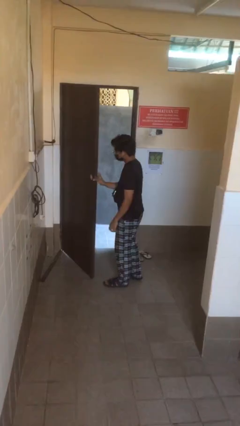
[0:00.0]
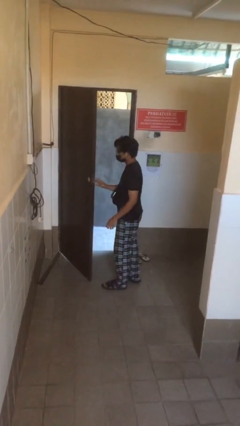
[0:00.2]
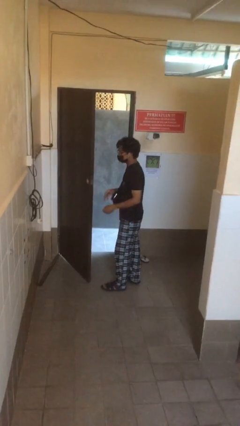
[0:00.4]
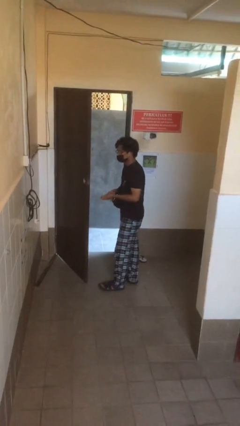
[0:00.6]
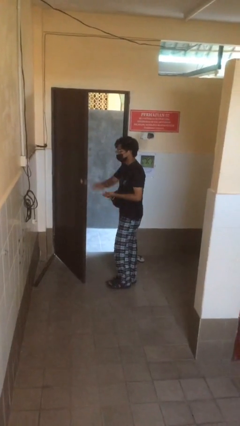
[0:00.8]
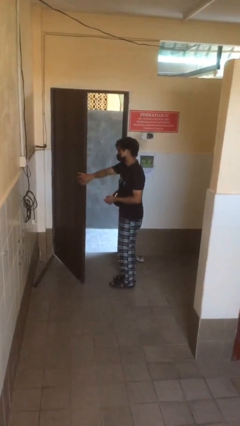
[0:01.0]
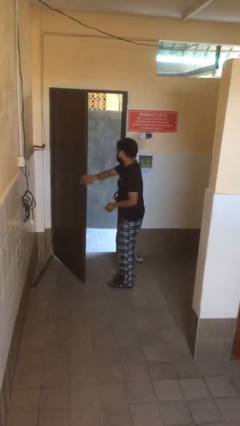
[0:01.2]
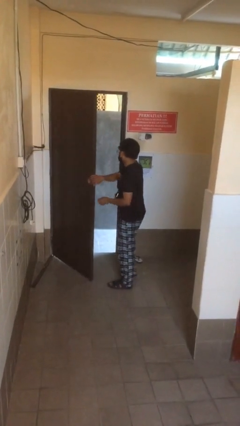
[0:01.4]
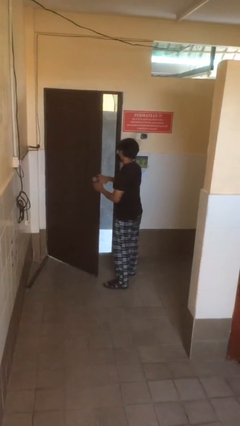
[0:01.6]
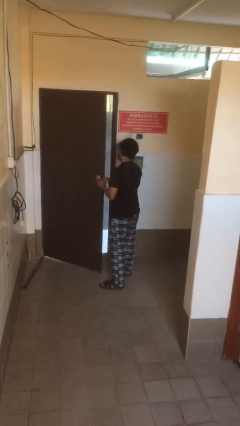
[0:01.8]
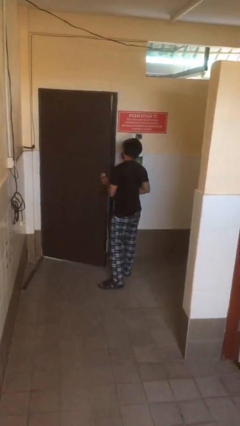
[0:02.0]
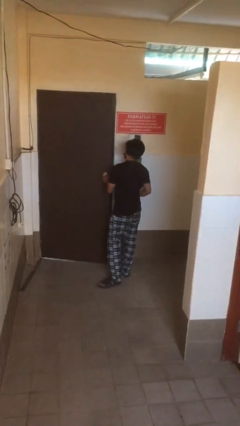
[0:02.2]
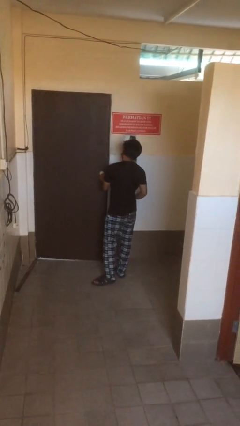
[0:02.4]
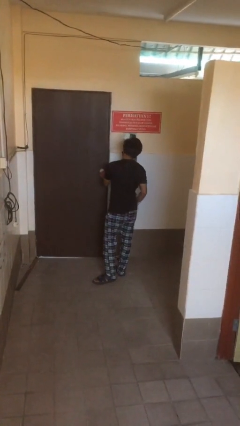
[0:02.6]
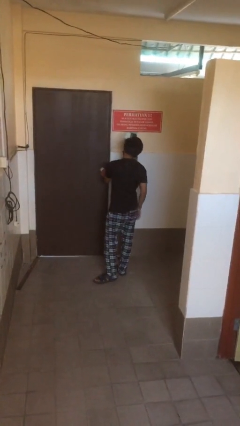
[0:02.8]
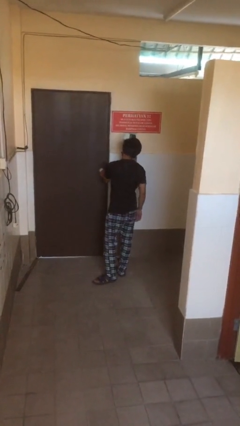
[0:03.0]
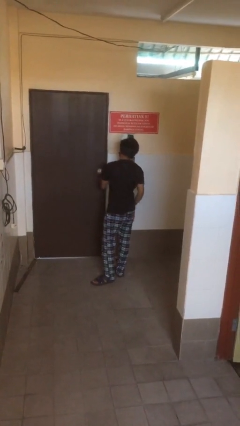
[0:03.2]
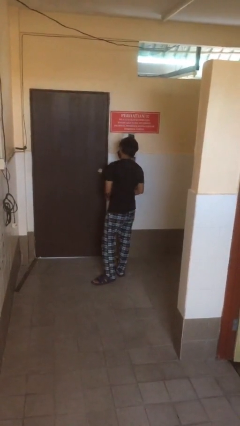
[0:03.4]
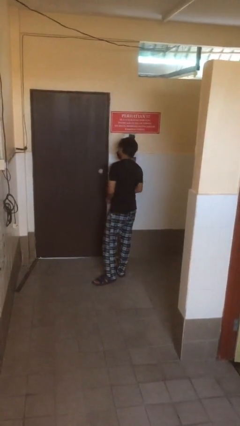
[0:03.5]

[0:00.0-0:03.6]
person closes facility door

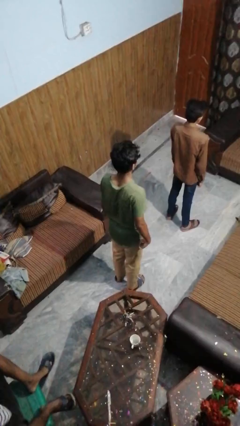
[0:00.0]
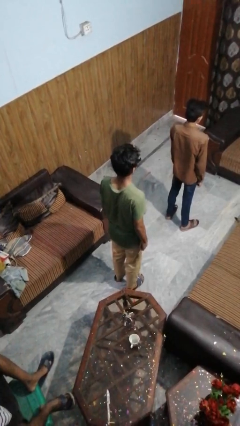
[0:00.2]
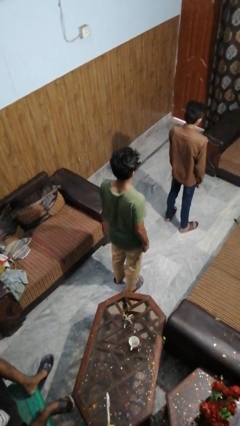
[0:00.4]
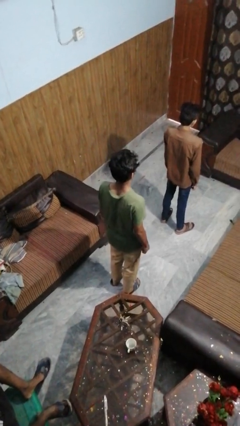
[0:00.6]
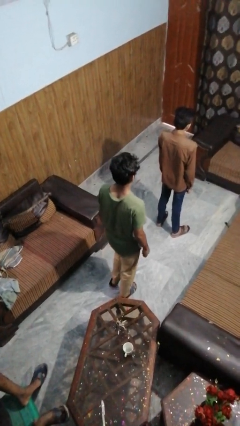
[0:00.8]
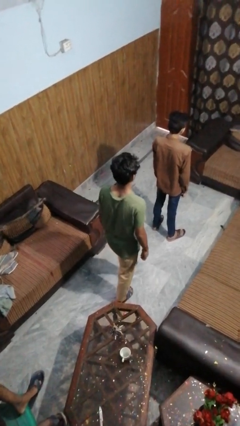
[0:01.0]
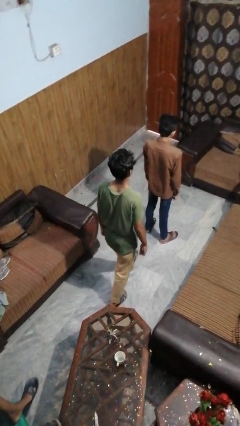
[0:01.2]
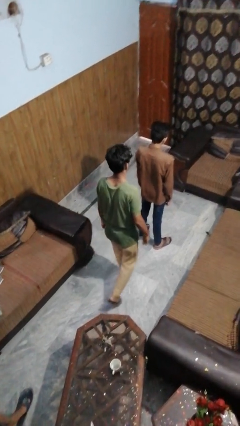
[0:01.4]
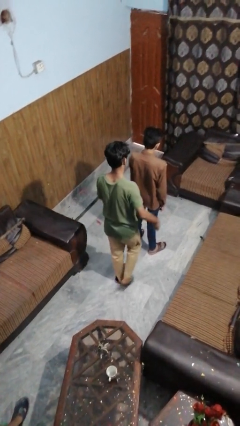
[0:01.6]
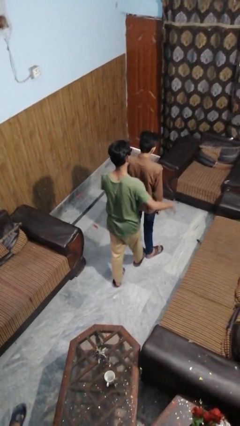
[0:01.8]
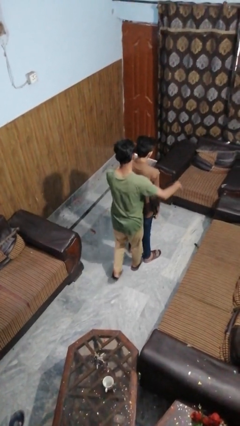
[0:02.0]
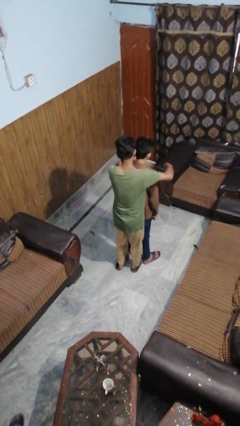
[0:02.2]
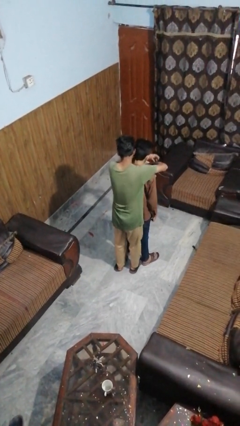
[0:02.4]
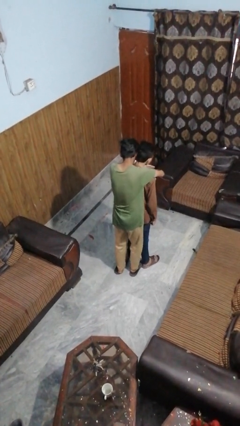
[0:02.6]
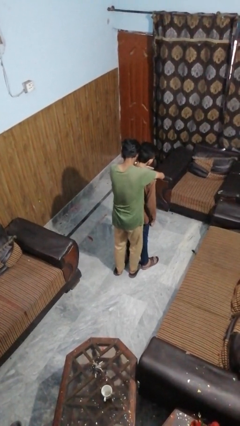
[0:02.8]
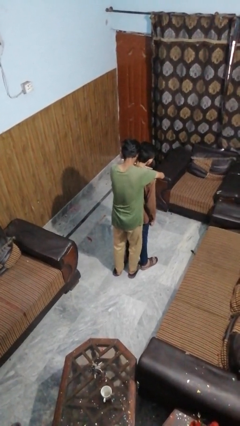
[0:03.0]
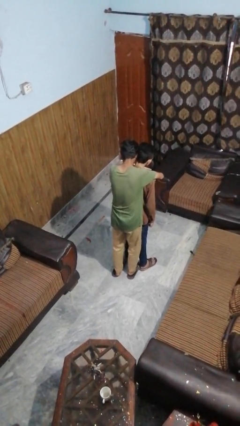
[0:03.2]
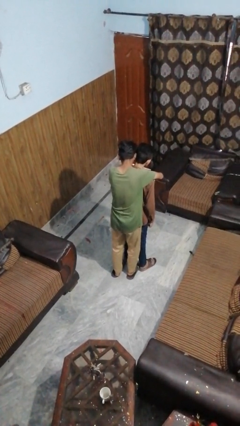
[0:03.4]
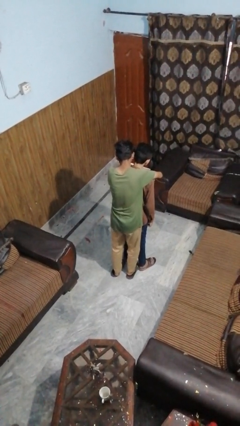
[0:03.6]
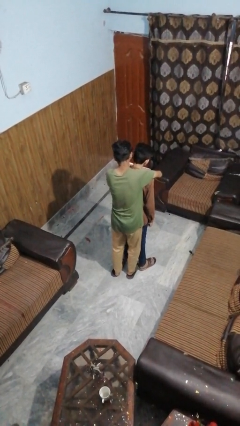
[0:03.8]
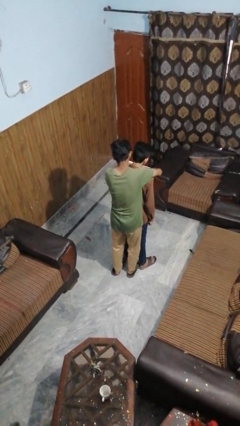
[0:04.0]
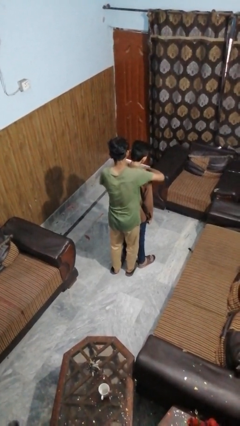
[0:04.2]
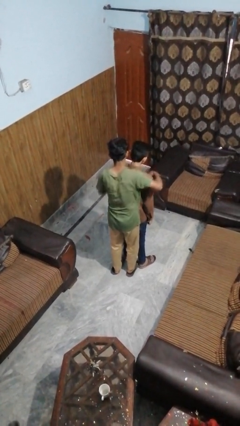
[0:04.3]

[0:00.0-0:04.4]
person hugs person from behind

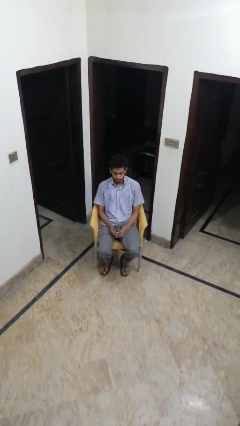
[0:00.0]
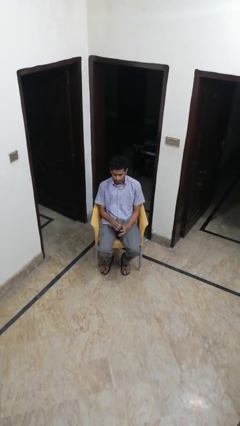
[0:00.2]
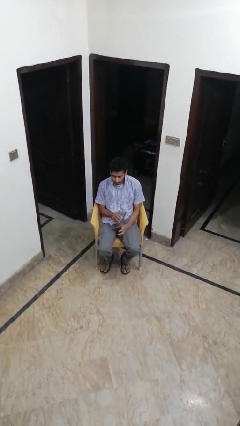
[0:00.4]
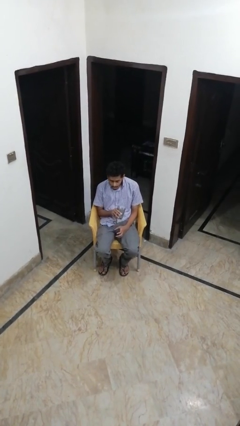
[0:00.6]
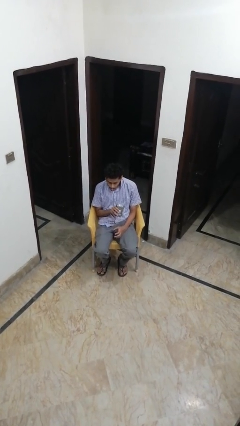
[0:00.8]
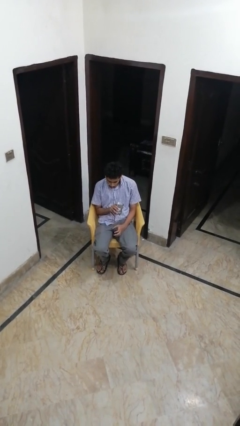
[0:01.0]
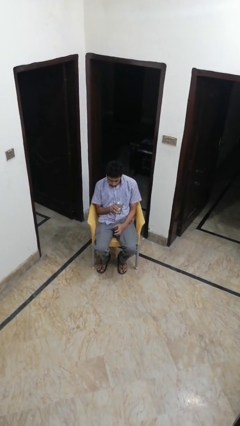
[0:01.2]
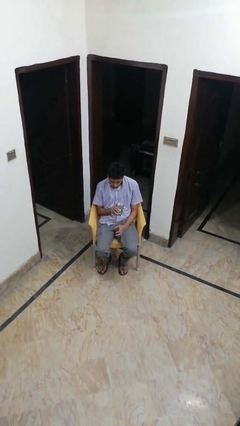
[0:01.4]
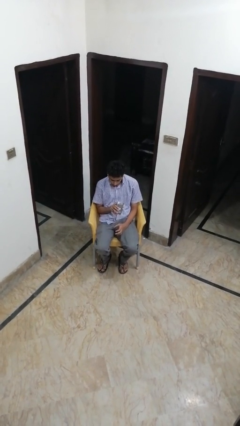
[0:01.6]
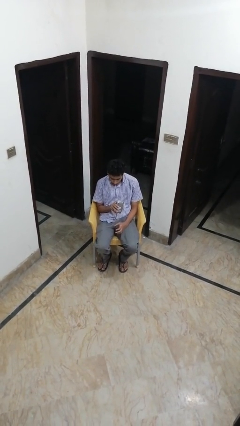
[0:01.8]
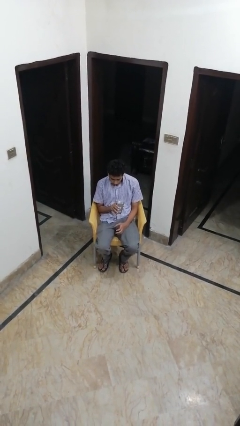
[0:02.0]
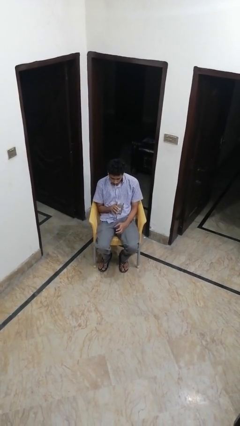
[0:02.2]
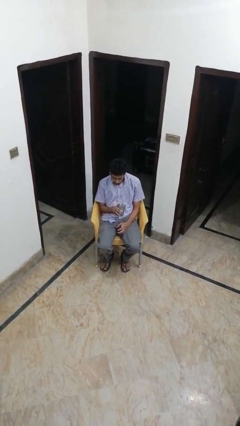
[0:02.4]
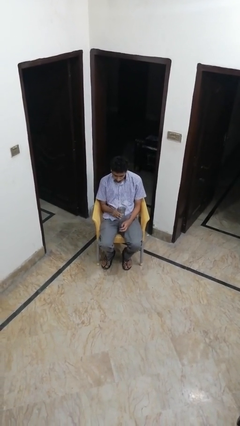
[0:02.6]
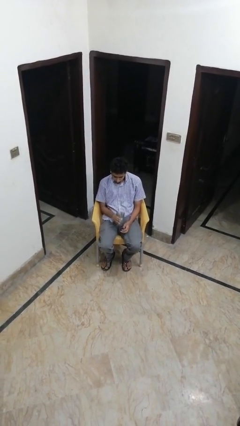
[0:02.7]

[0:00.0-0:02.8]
person drinks from straw

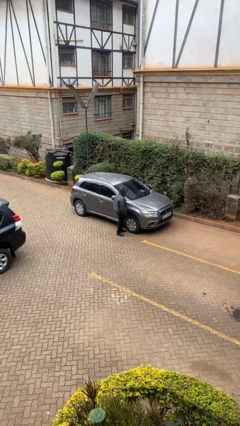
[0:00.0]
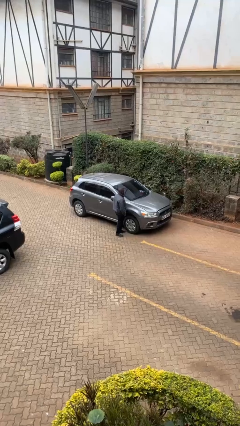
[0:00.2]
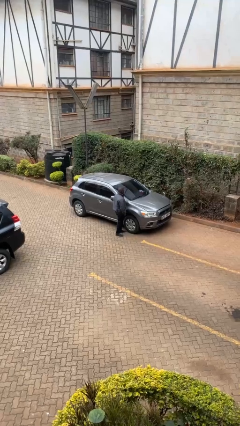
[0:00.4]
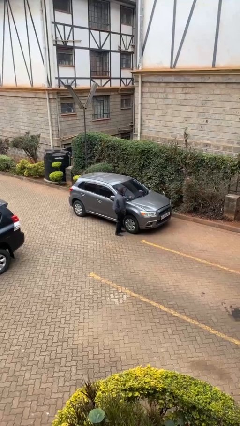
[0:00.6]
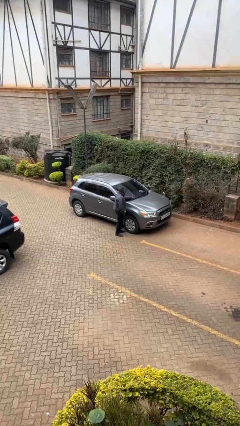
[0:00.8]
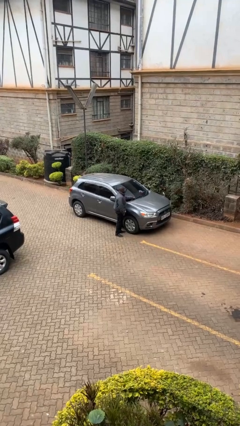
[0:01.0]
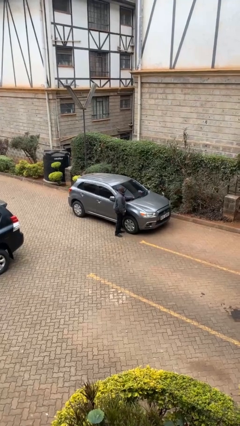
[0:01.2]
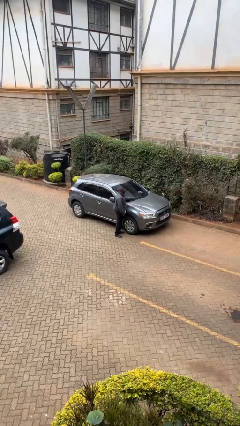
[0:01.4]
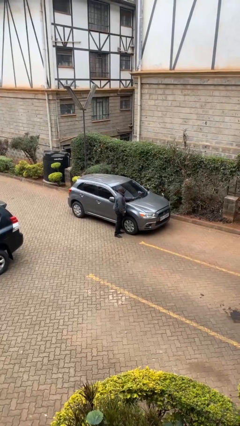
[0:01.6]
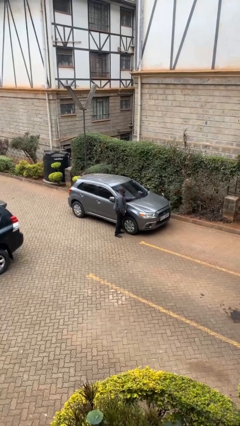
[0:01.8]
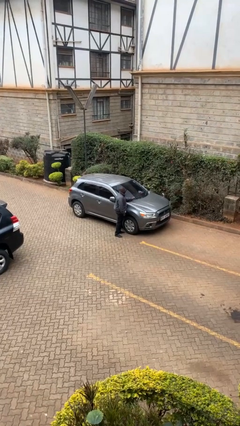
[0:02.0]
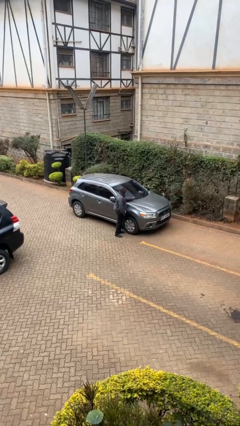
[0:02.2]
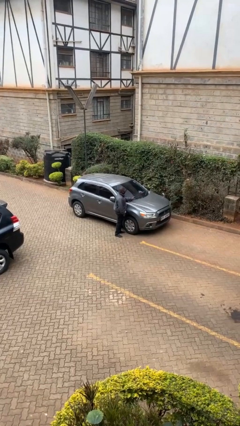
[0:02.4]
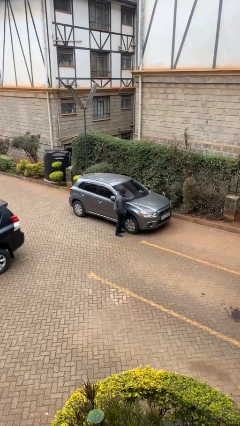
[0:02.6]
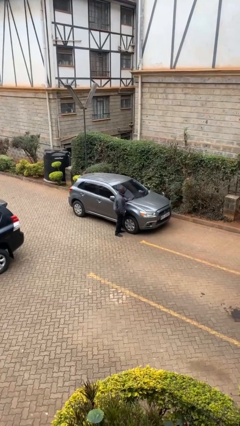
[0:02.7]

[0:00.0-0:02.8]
person flips up car wipers

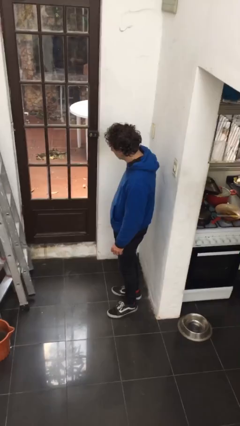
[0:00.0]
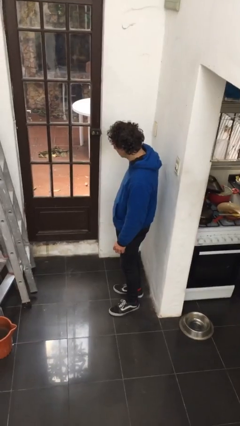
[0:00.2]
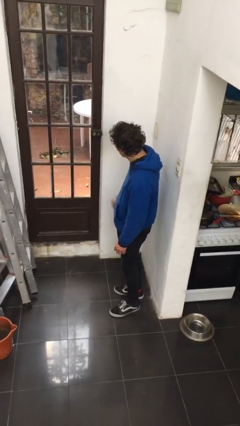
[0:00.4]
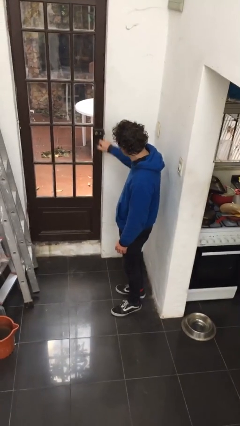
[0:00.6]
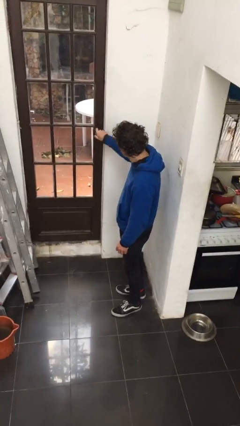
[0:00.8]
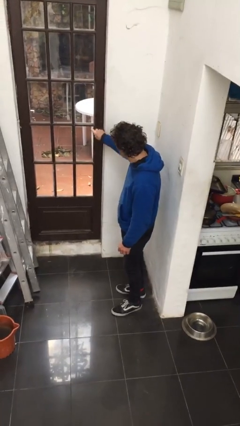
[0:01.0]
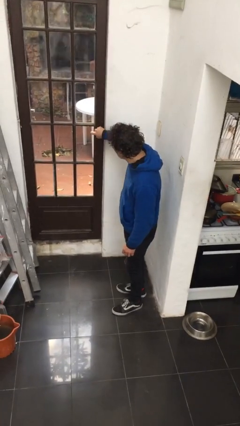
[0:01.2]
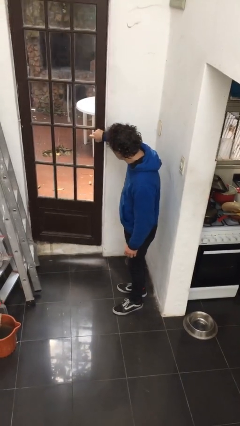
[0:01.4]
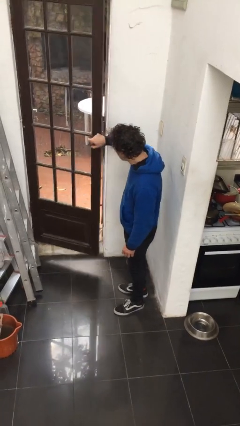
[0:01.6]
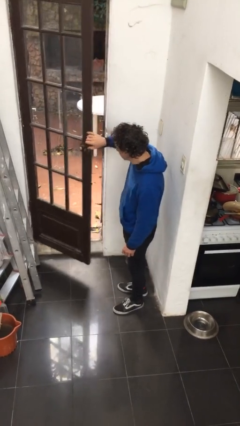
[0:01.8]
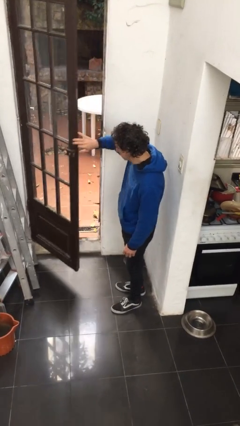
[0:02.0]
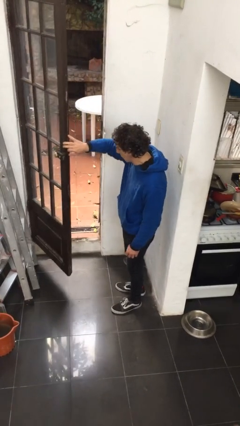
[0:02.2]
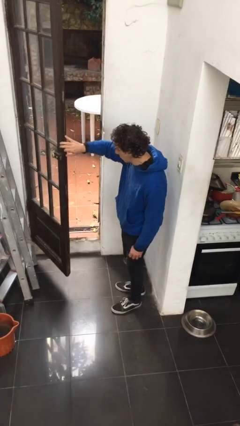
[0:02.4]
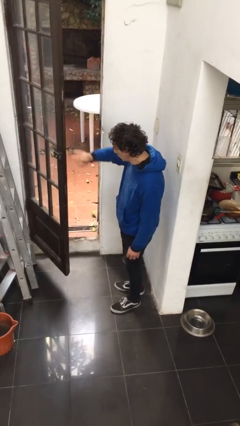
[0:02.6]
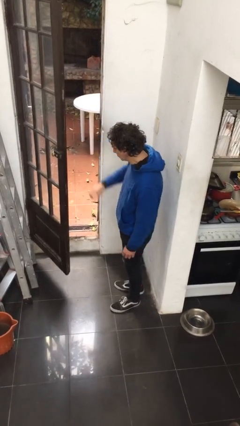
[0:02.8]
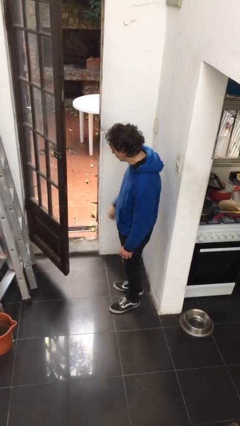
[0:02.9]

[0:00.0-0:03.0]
person opens facility door

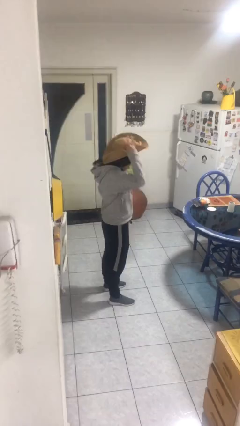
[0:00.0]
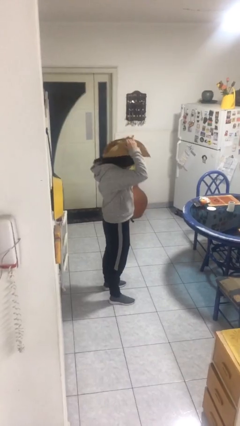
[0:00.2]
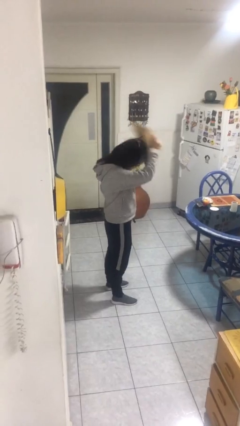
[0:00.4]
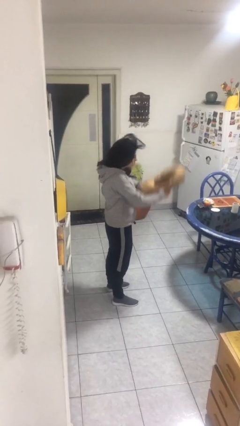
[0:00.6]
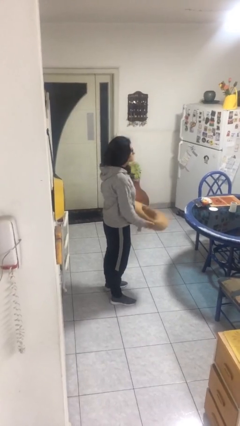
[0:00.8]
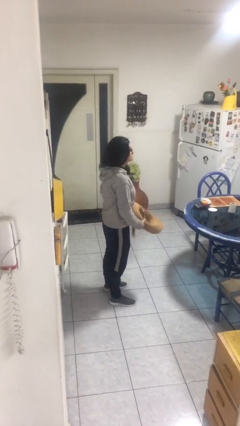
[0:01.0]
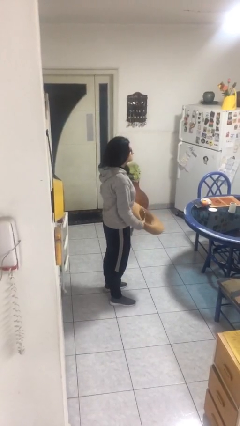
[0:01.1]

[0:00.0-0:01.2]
person takes off hat
